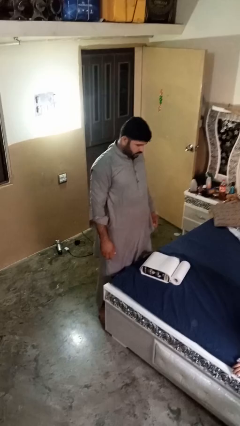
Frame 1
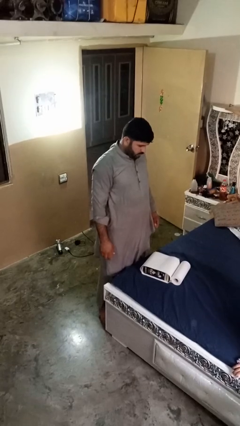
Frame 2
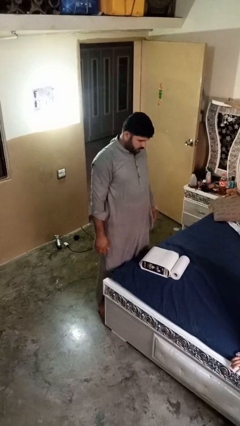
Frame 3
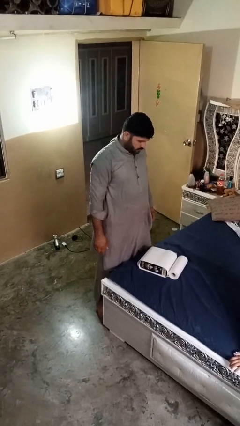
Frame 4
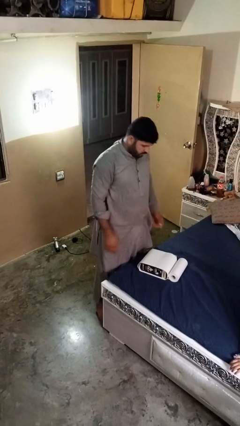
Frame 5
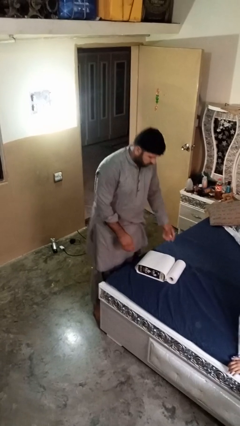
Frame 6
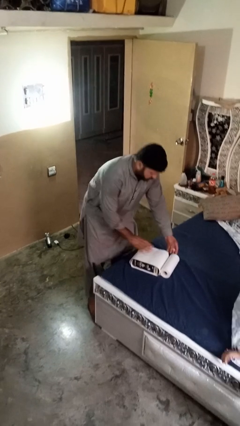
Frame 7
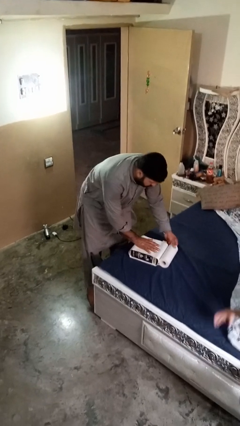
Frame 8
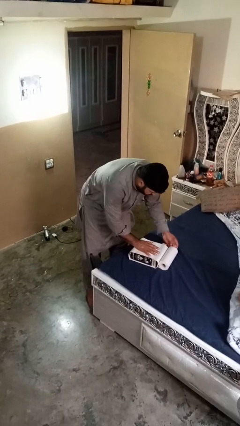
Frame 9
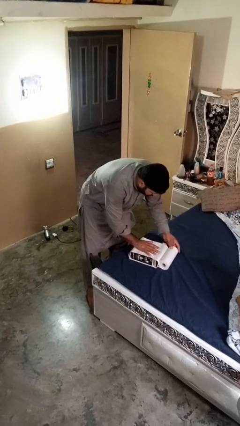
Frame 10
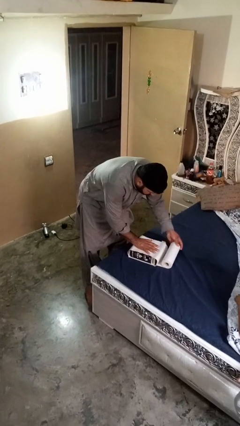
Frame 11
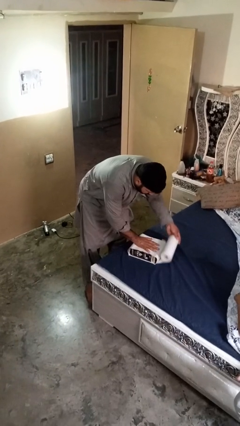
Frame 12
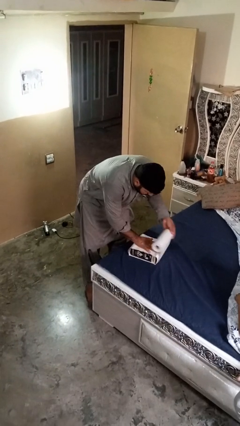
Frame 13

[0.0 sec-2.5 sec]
person wraps box

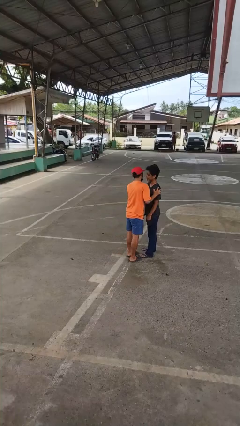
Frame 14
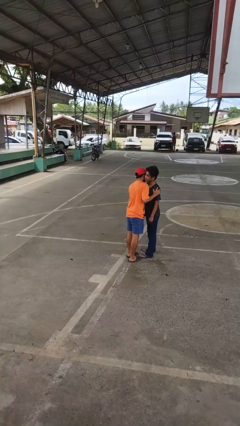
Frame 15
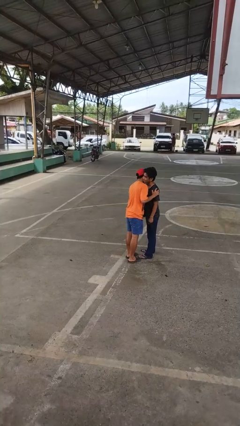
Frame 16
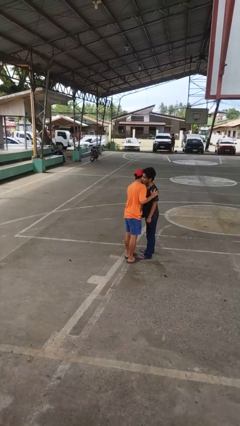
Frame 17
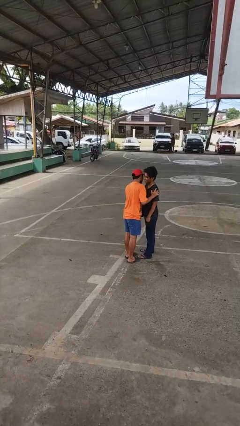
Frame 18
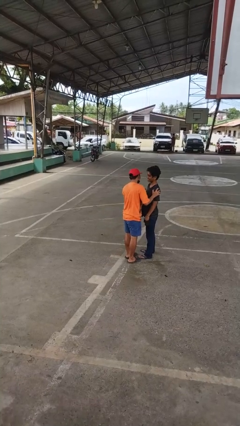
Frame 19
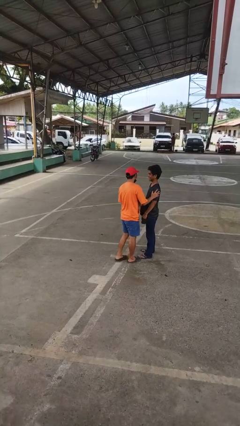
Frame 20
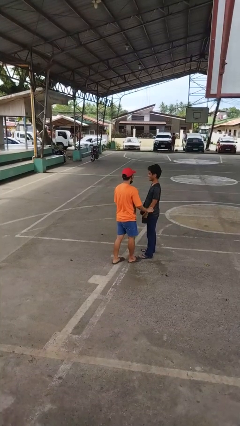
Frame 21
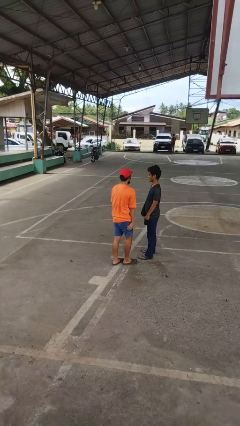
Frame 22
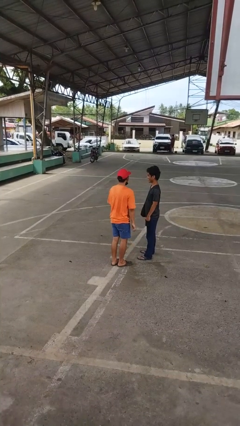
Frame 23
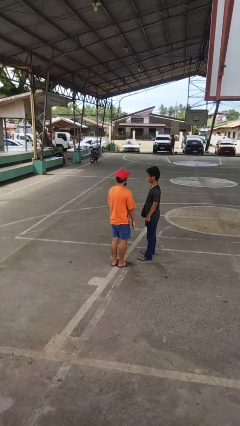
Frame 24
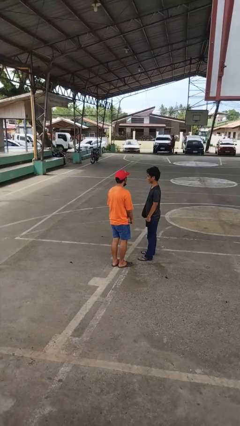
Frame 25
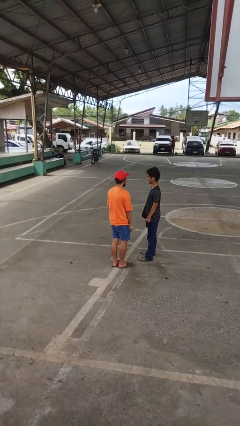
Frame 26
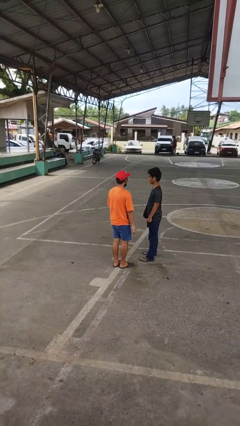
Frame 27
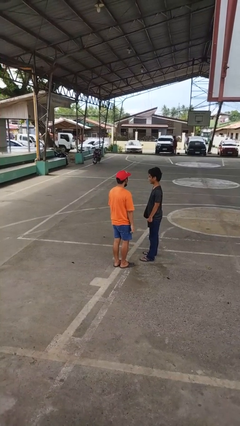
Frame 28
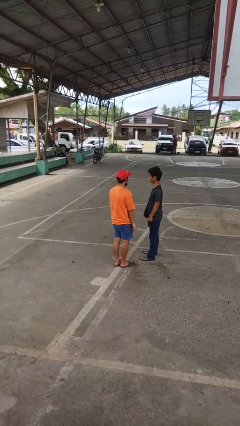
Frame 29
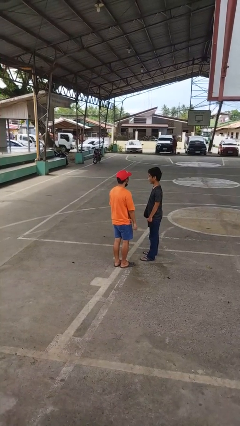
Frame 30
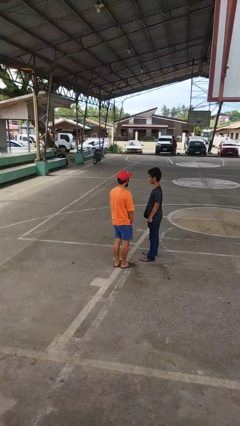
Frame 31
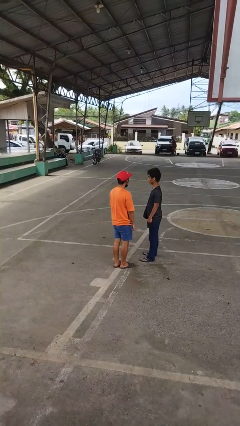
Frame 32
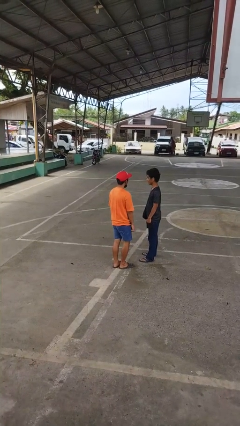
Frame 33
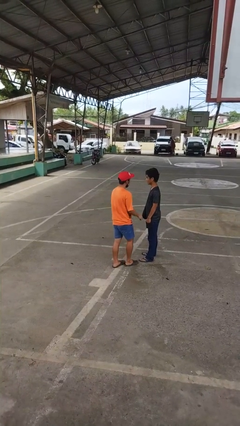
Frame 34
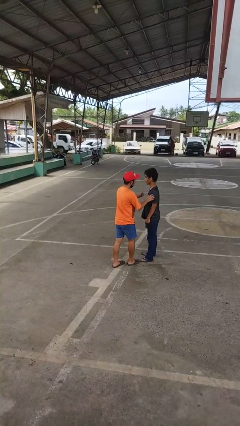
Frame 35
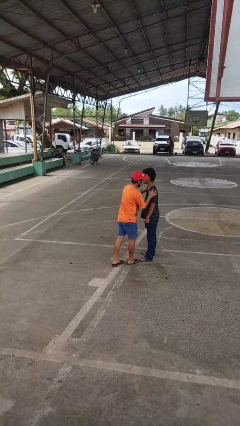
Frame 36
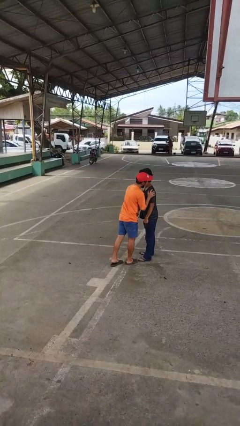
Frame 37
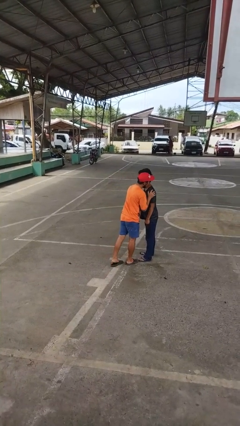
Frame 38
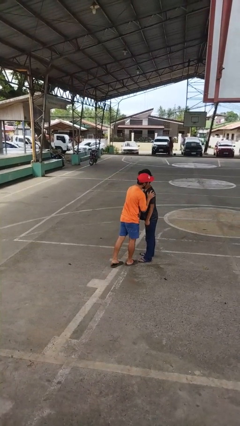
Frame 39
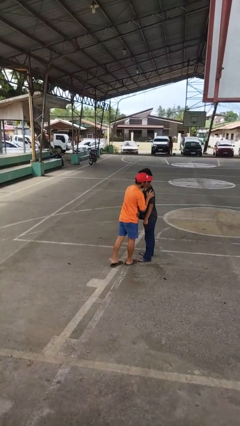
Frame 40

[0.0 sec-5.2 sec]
person kisses cheek of person

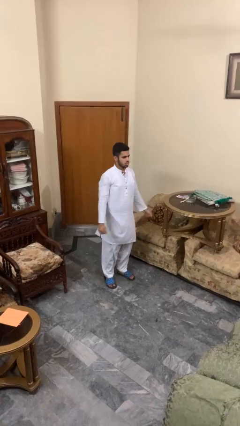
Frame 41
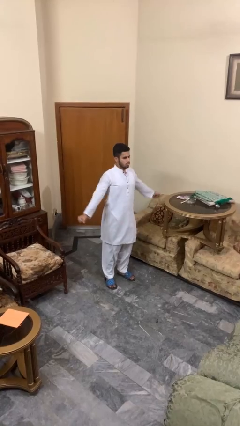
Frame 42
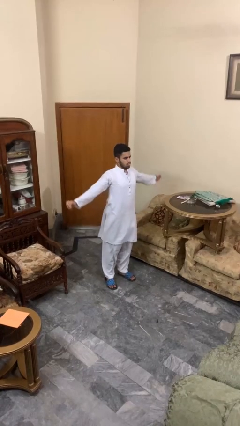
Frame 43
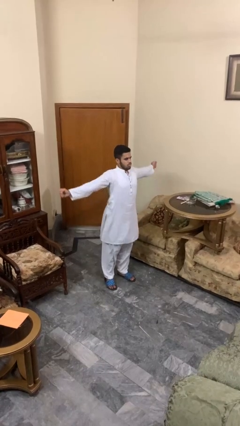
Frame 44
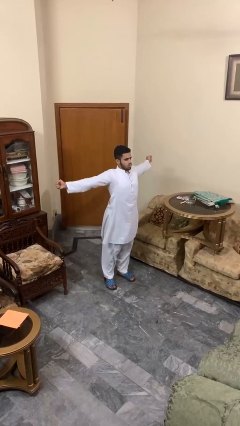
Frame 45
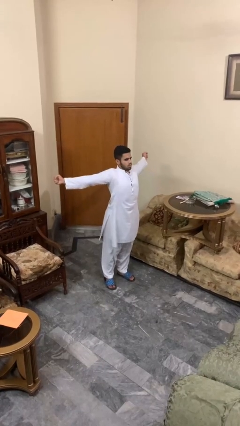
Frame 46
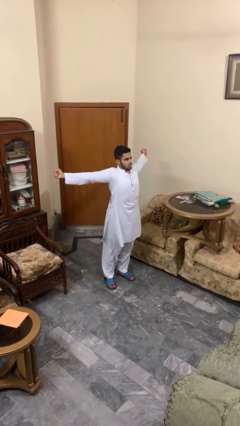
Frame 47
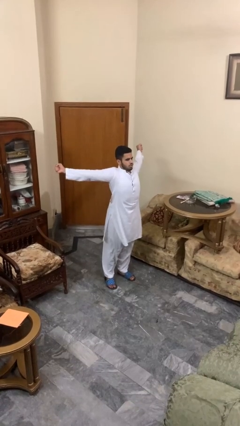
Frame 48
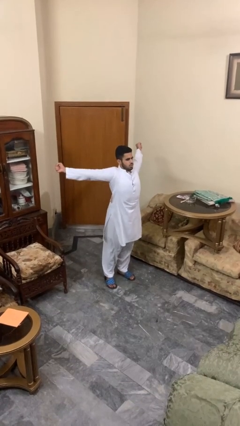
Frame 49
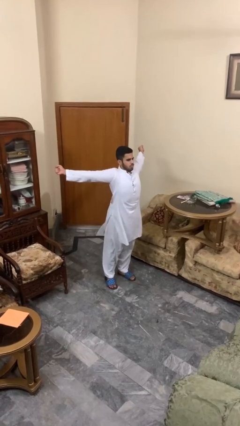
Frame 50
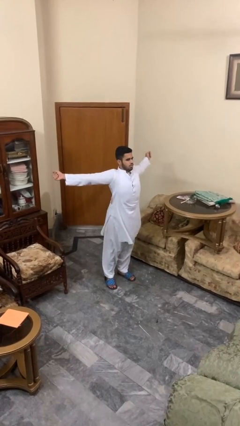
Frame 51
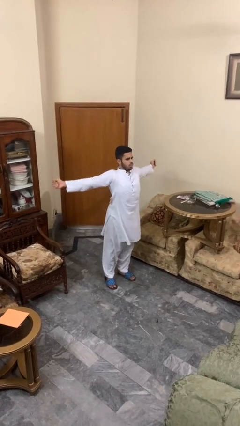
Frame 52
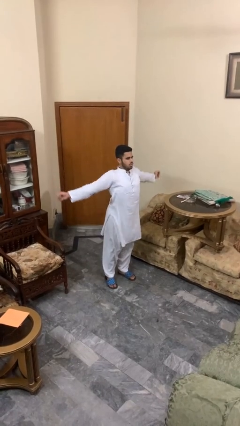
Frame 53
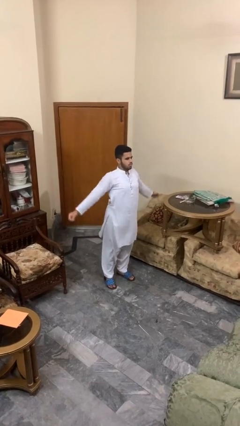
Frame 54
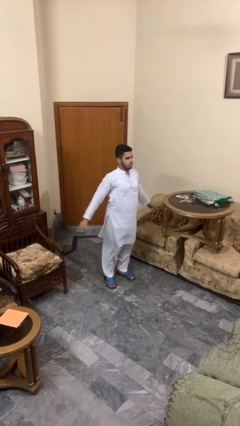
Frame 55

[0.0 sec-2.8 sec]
person stretches arms to side

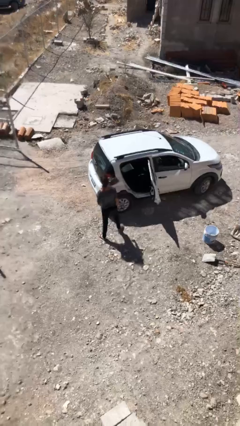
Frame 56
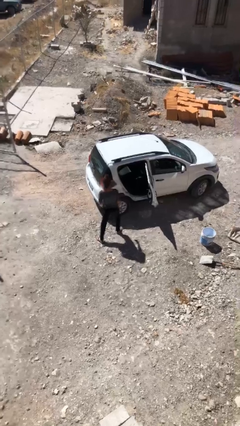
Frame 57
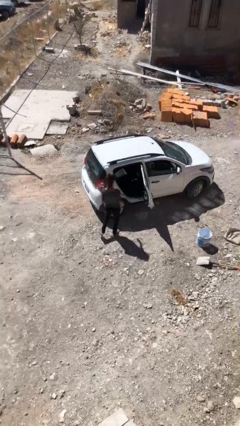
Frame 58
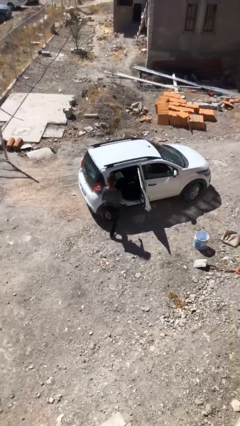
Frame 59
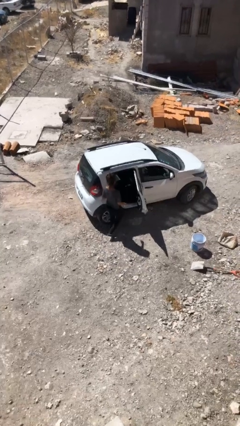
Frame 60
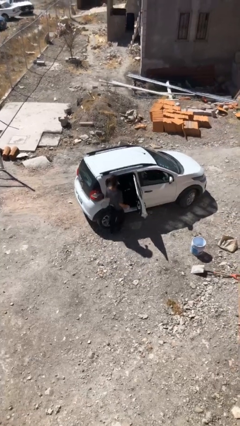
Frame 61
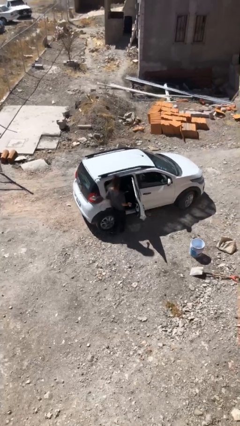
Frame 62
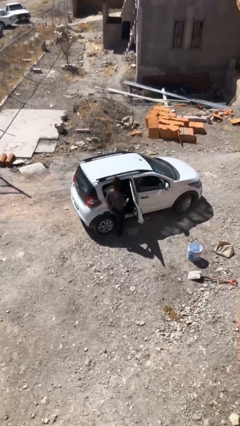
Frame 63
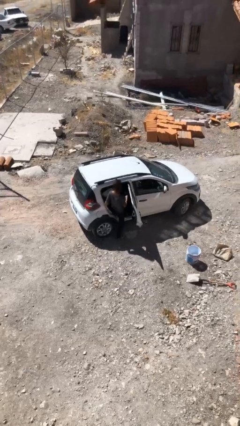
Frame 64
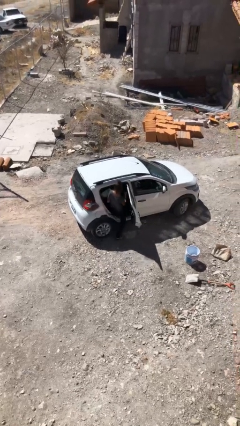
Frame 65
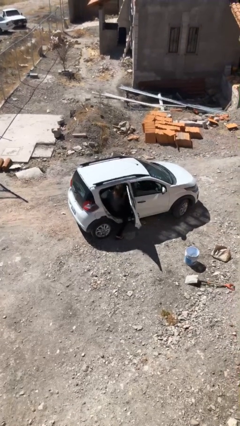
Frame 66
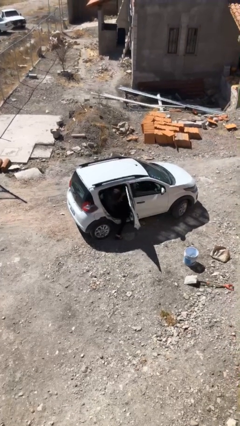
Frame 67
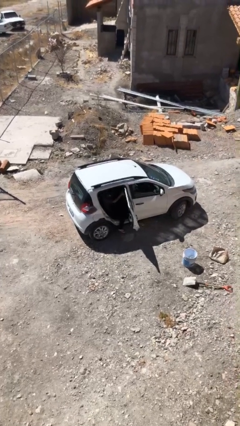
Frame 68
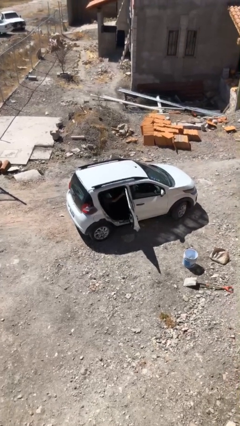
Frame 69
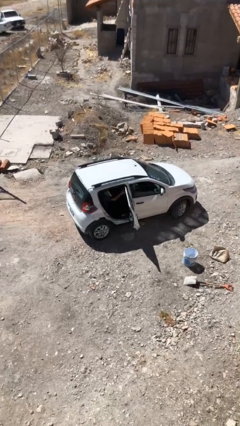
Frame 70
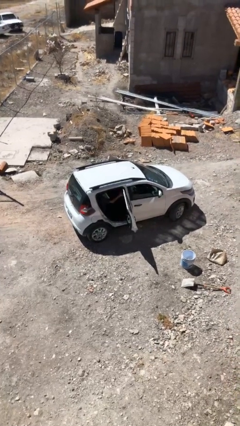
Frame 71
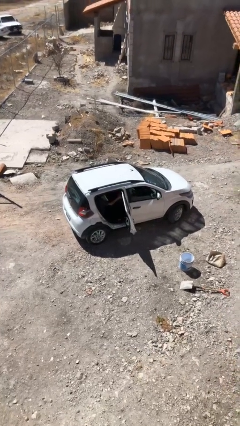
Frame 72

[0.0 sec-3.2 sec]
person enters car

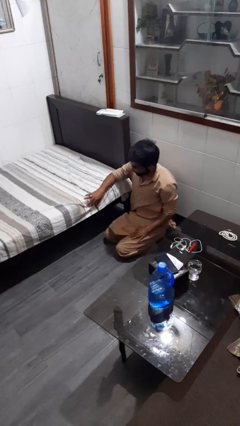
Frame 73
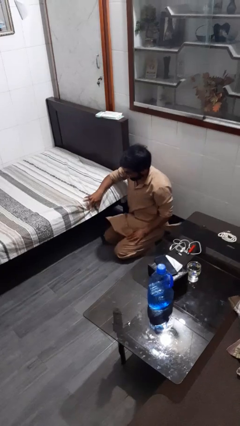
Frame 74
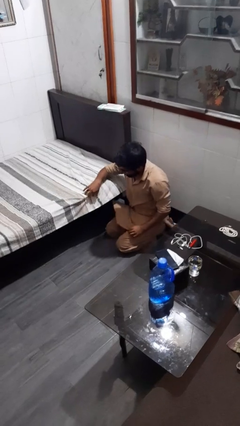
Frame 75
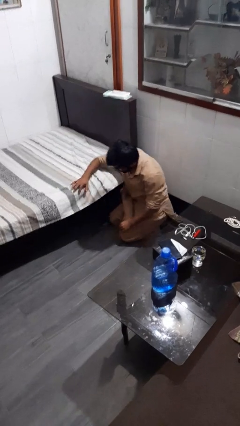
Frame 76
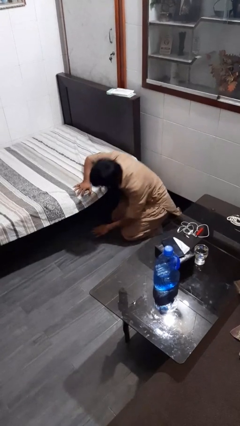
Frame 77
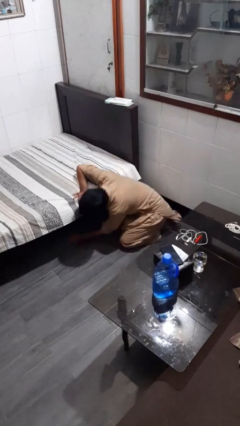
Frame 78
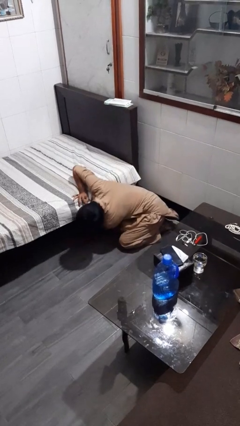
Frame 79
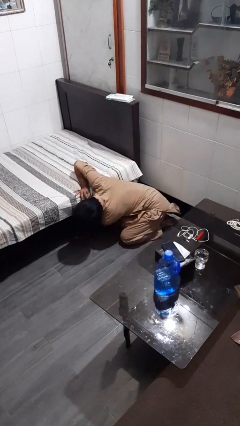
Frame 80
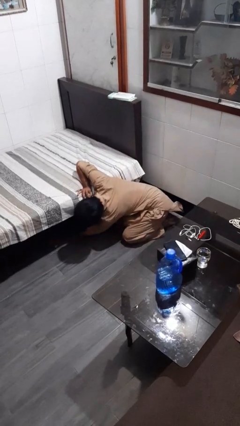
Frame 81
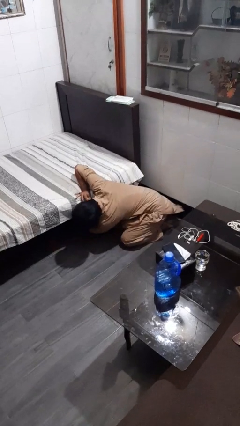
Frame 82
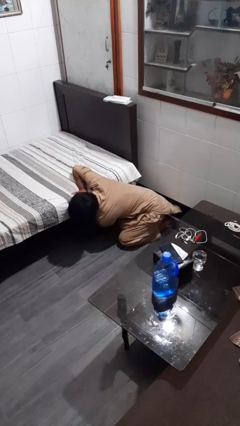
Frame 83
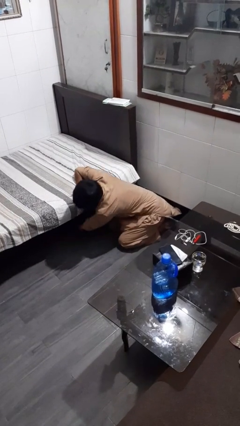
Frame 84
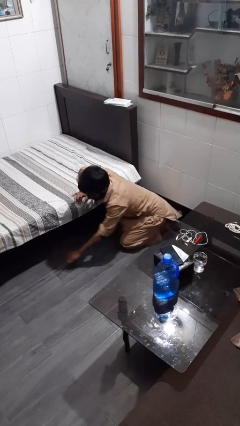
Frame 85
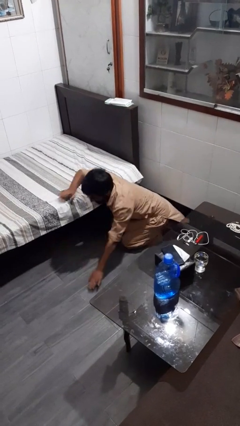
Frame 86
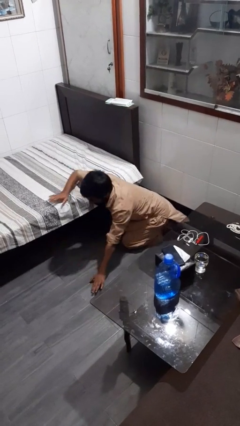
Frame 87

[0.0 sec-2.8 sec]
person searches under bed

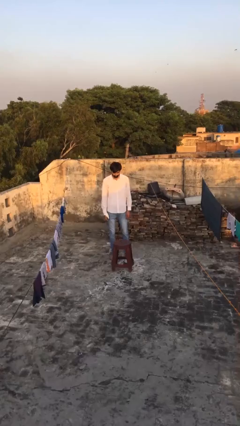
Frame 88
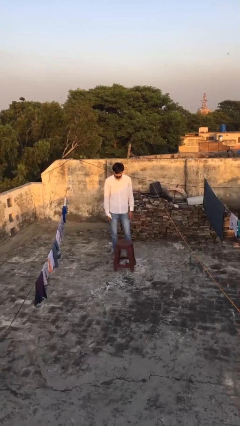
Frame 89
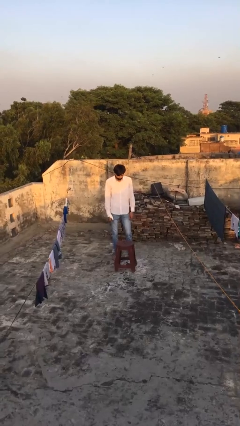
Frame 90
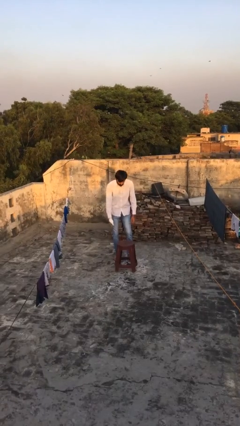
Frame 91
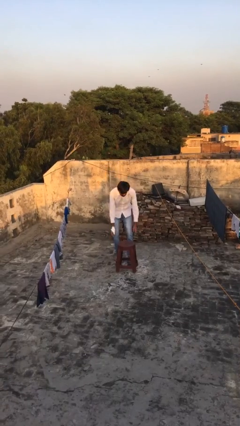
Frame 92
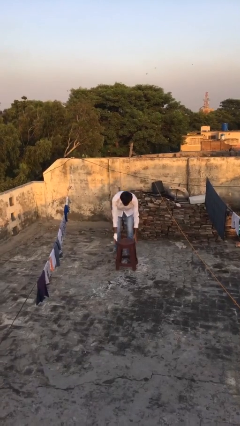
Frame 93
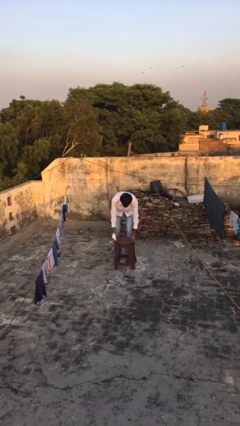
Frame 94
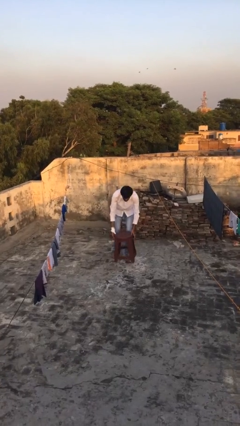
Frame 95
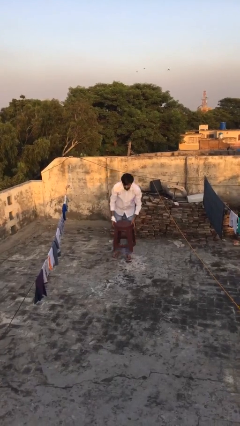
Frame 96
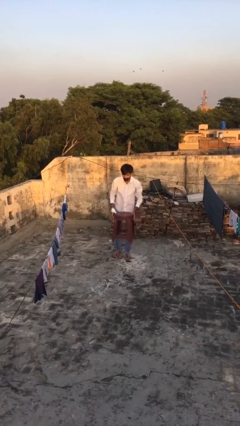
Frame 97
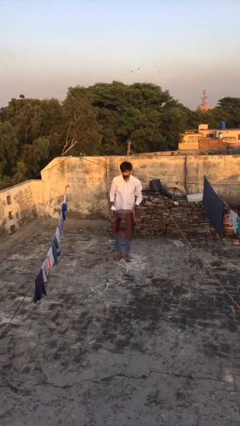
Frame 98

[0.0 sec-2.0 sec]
person picks up object from floor
